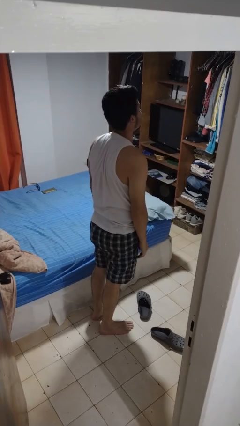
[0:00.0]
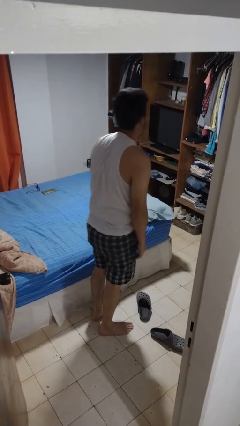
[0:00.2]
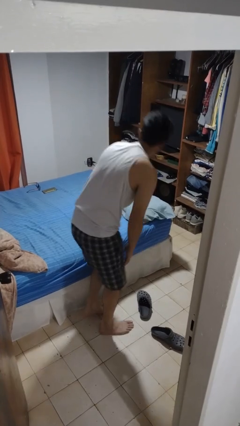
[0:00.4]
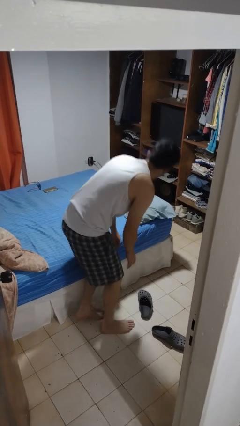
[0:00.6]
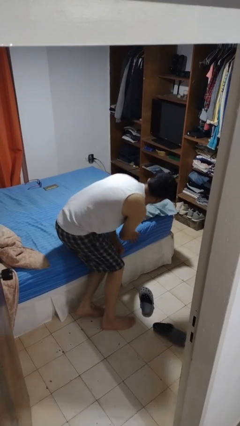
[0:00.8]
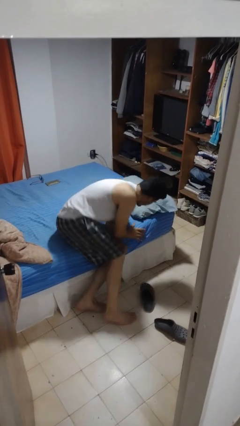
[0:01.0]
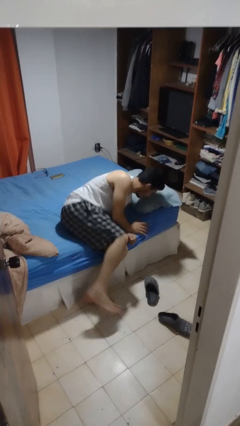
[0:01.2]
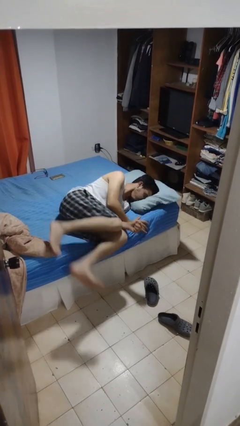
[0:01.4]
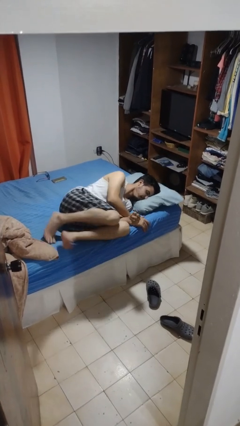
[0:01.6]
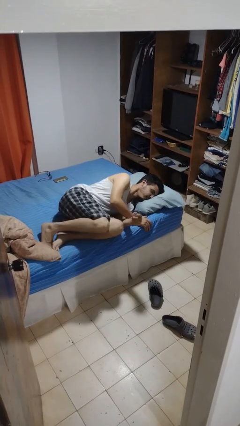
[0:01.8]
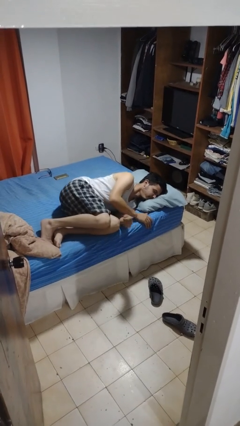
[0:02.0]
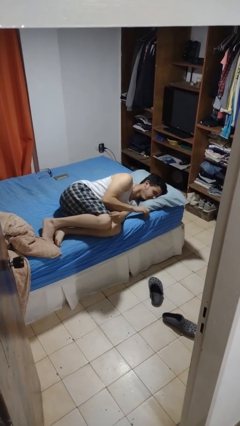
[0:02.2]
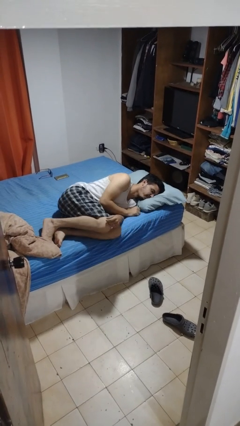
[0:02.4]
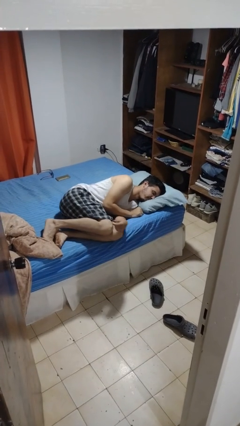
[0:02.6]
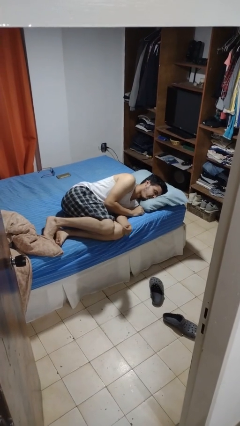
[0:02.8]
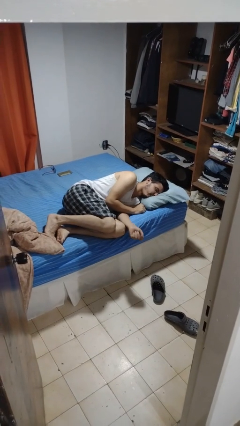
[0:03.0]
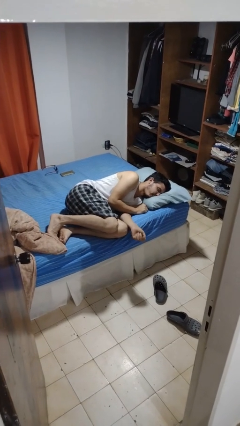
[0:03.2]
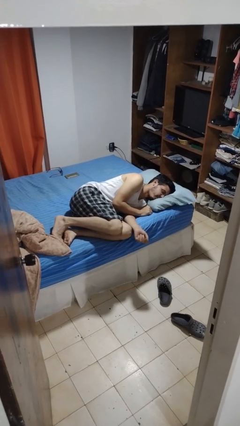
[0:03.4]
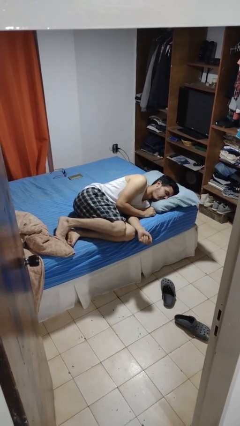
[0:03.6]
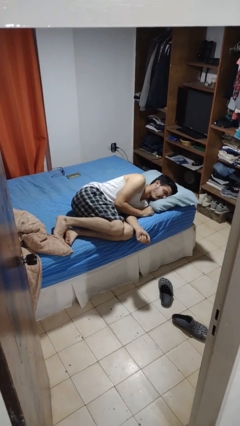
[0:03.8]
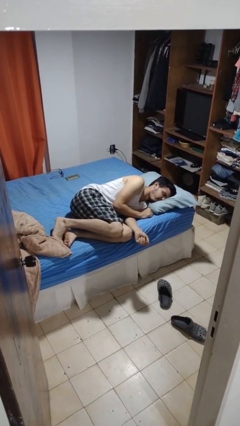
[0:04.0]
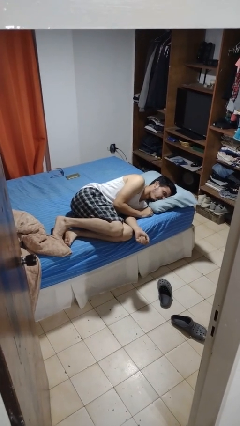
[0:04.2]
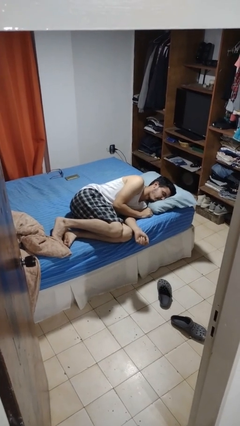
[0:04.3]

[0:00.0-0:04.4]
person lies down on bed

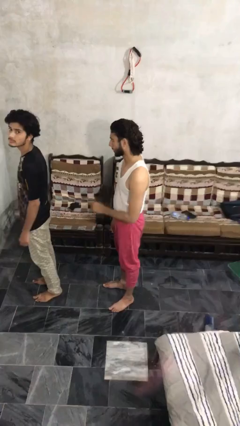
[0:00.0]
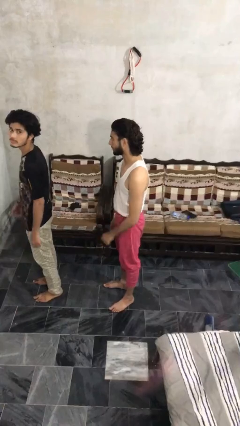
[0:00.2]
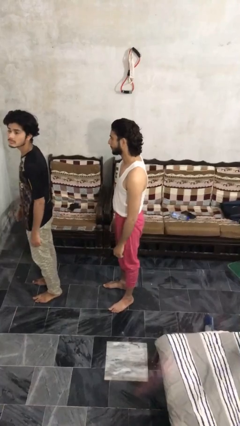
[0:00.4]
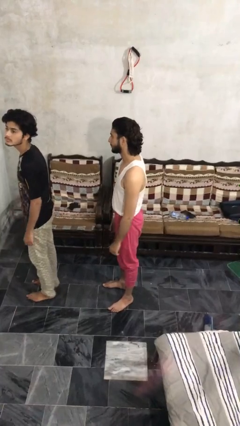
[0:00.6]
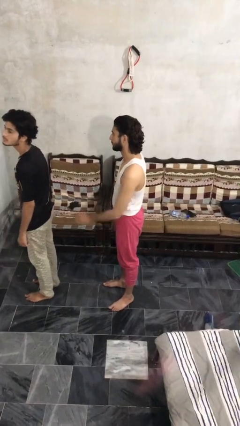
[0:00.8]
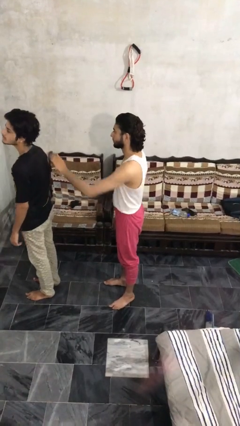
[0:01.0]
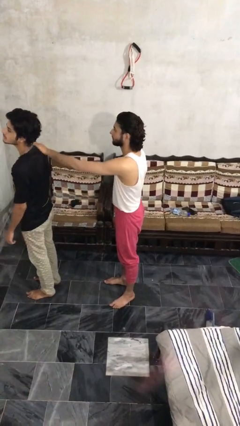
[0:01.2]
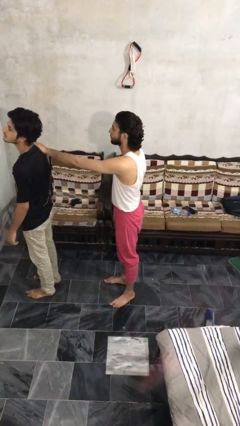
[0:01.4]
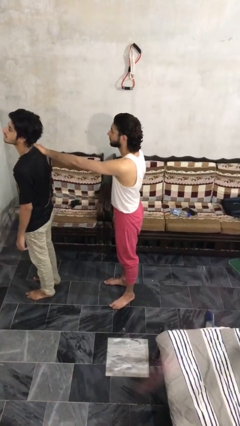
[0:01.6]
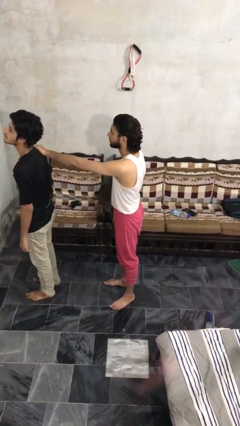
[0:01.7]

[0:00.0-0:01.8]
person grabs person by shoulder

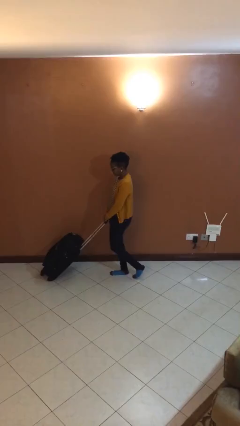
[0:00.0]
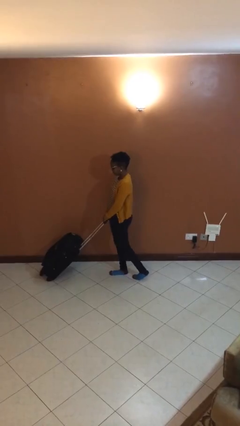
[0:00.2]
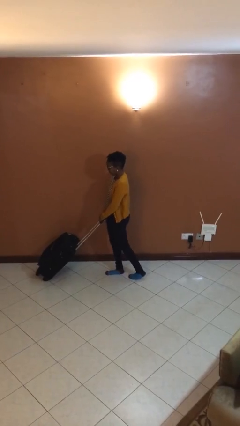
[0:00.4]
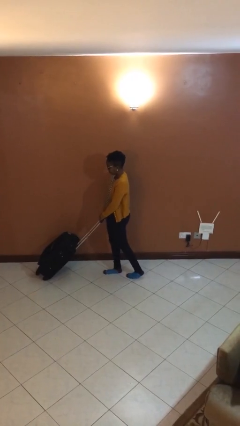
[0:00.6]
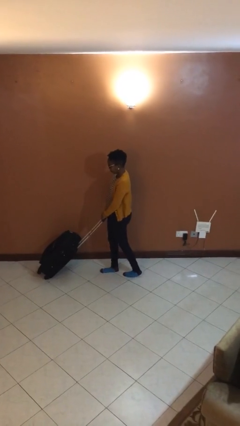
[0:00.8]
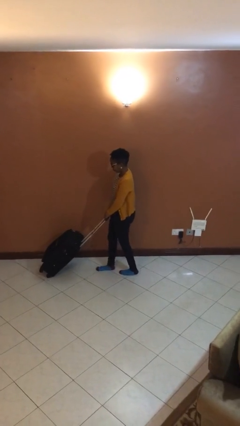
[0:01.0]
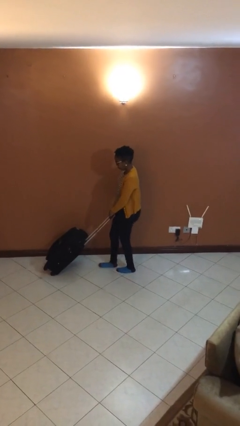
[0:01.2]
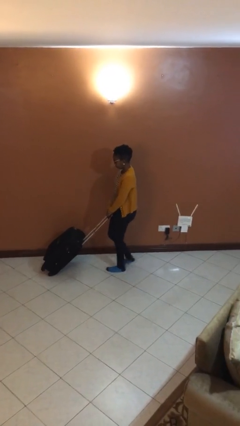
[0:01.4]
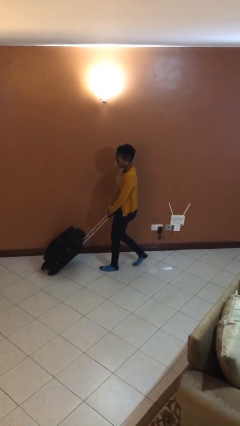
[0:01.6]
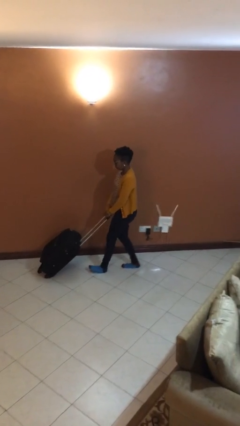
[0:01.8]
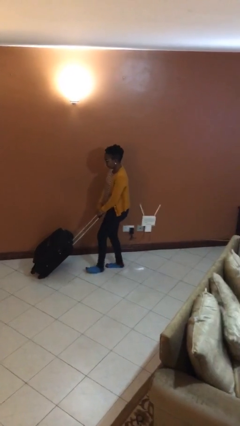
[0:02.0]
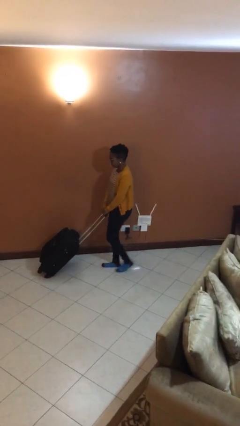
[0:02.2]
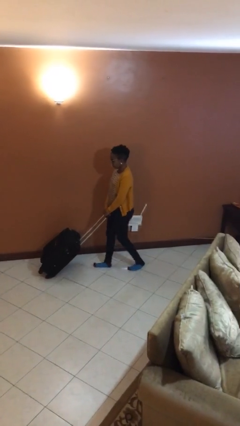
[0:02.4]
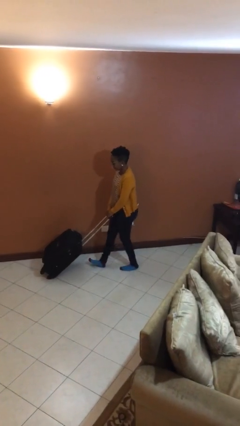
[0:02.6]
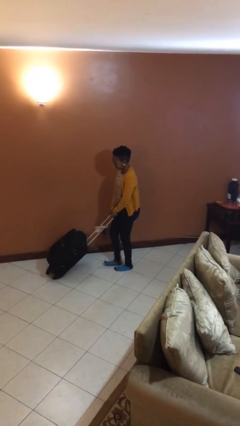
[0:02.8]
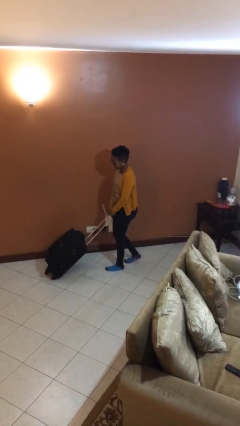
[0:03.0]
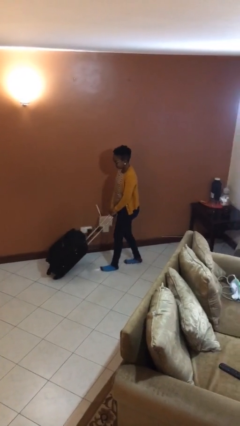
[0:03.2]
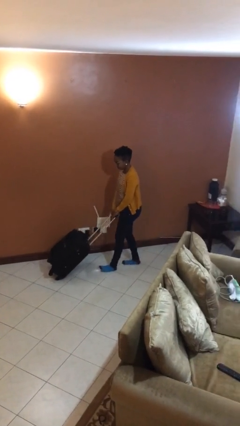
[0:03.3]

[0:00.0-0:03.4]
person pulls wheeled cart

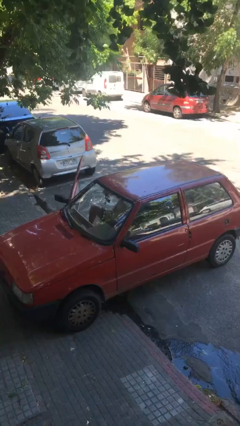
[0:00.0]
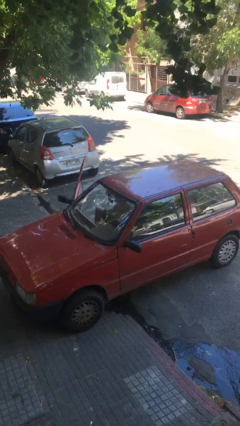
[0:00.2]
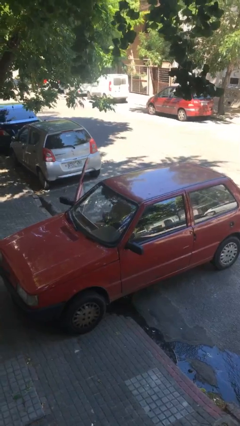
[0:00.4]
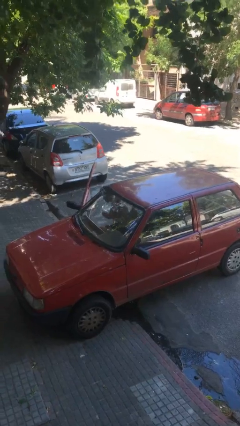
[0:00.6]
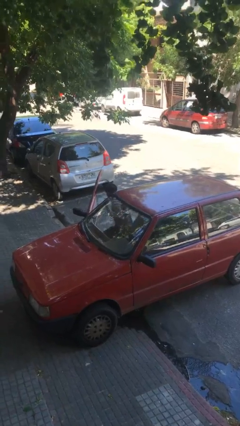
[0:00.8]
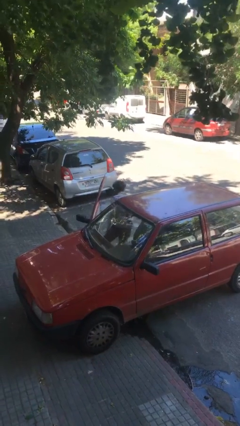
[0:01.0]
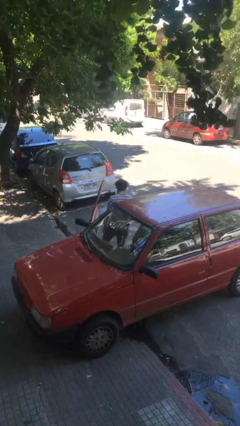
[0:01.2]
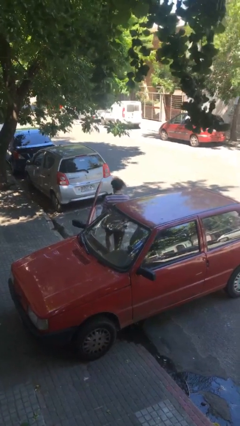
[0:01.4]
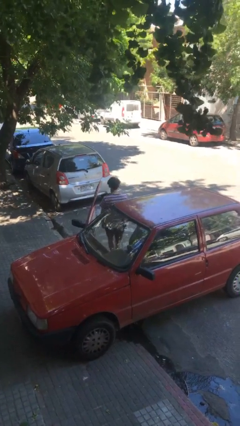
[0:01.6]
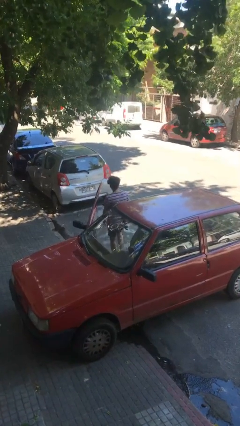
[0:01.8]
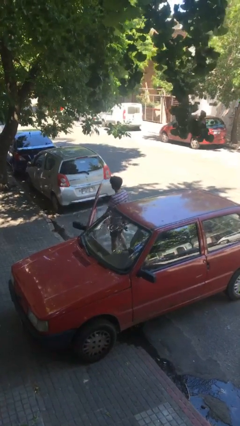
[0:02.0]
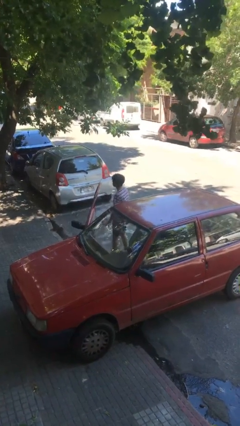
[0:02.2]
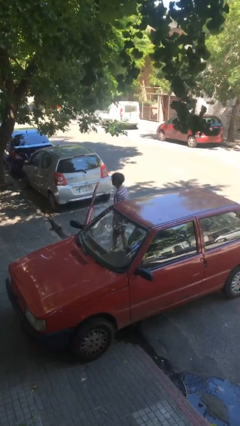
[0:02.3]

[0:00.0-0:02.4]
person exits car

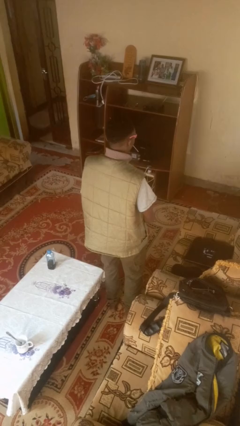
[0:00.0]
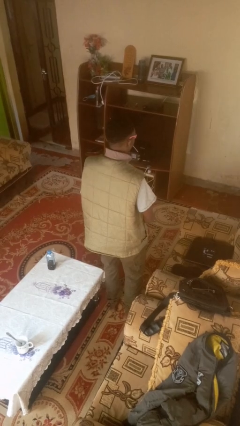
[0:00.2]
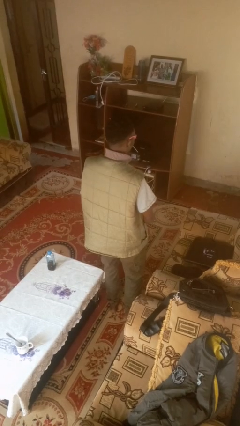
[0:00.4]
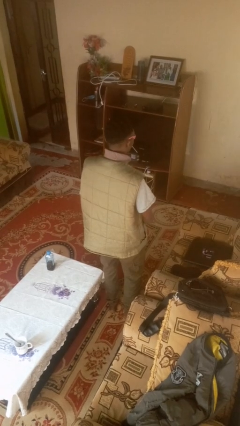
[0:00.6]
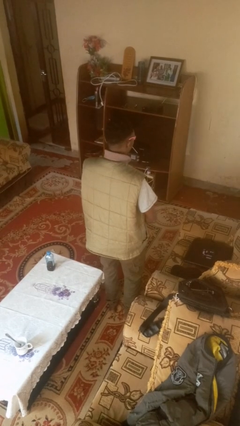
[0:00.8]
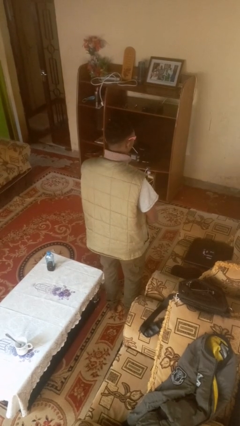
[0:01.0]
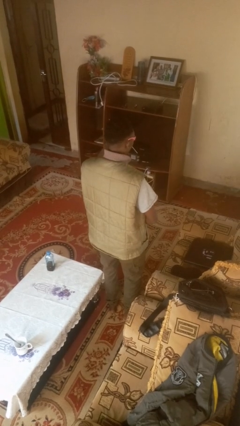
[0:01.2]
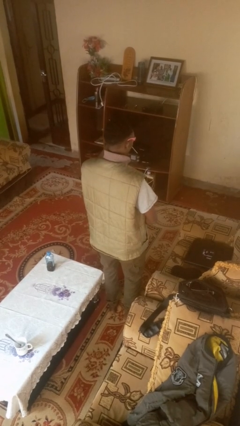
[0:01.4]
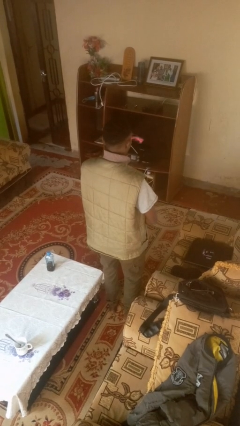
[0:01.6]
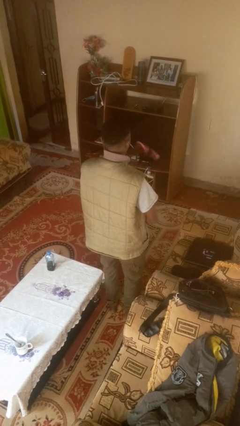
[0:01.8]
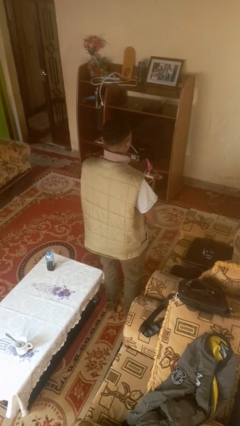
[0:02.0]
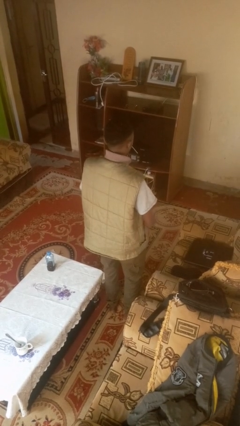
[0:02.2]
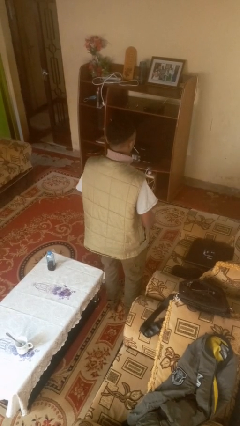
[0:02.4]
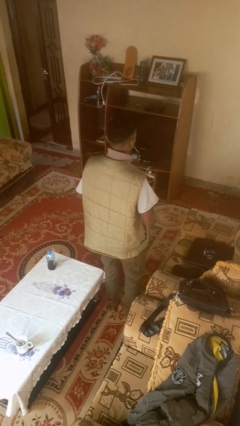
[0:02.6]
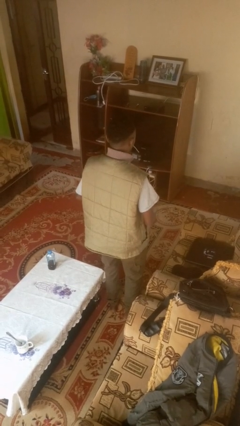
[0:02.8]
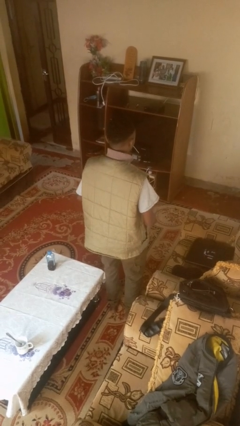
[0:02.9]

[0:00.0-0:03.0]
person takes off sunglasses

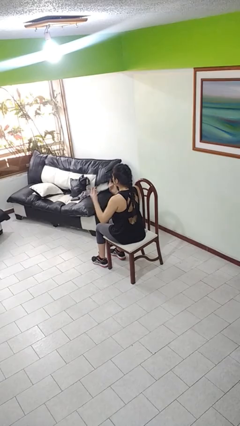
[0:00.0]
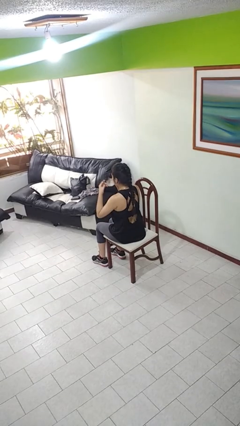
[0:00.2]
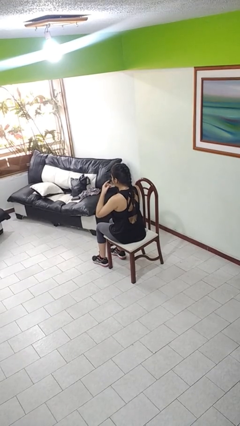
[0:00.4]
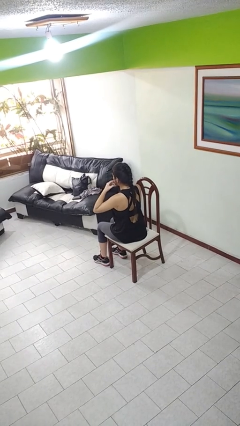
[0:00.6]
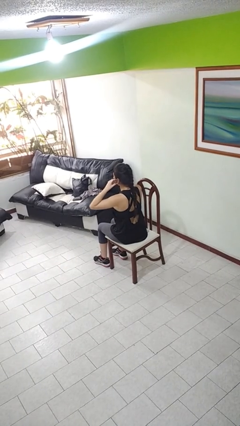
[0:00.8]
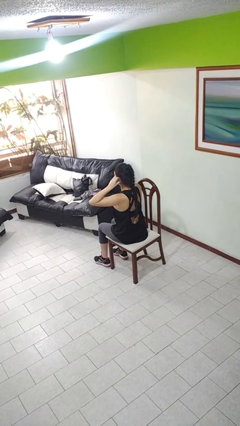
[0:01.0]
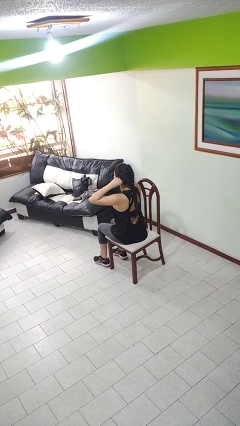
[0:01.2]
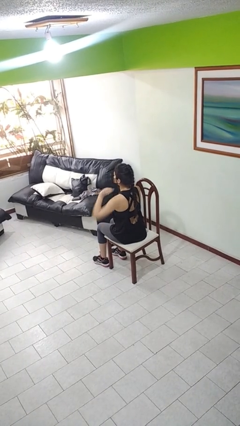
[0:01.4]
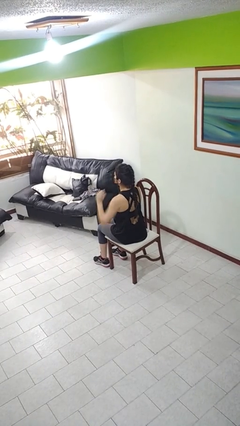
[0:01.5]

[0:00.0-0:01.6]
person puts on facemask

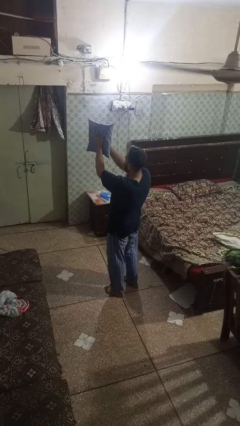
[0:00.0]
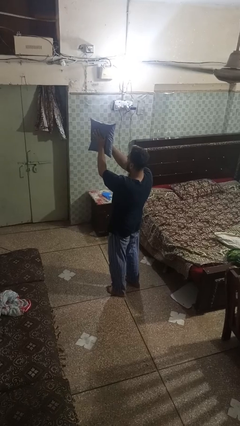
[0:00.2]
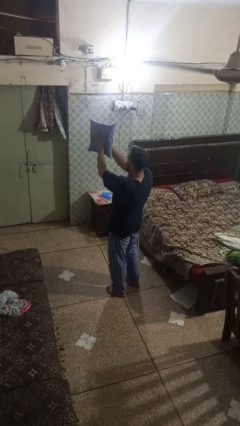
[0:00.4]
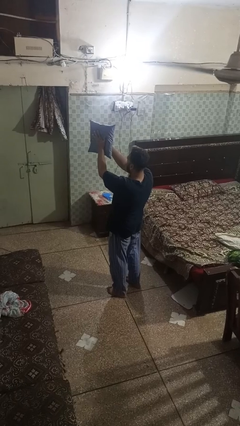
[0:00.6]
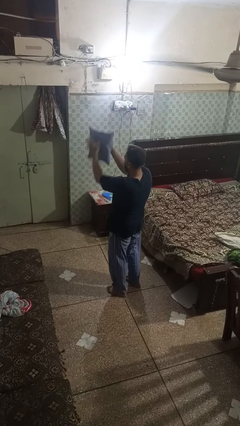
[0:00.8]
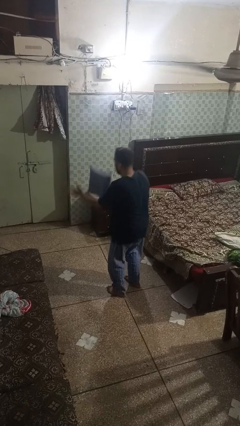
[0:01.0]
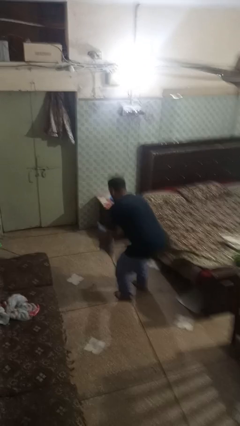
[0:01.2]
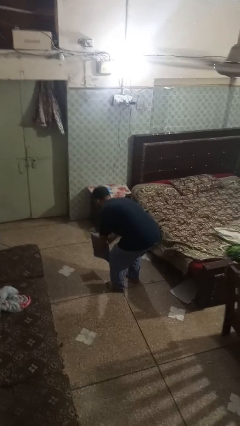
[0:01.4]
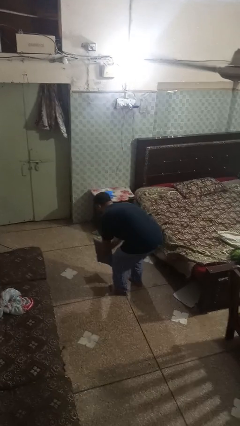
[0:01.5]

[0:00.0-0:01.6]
person drops object
